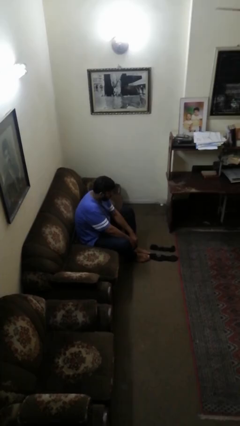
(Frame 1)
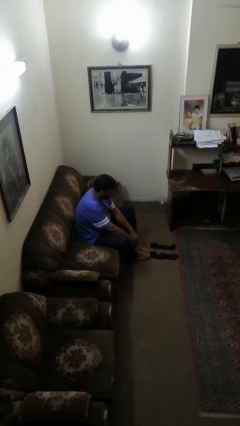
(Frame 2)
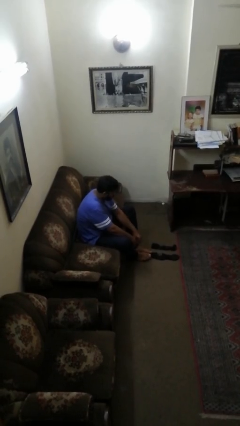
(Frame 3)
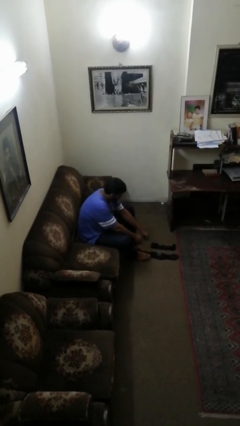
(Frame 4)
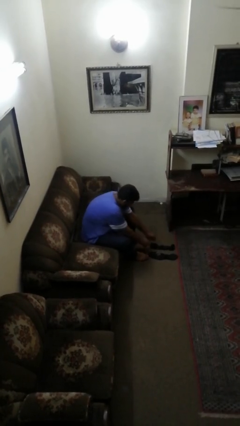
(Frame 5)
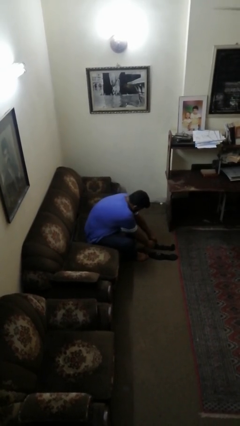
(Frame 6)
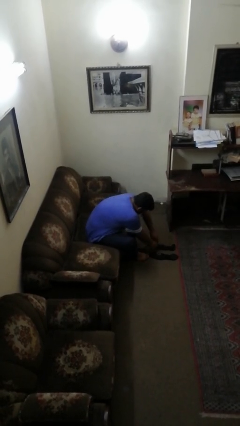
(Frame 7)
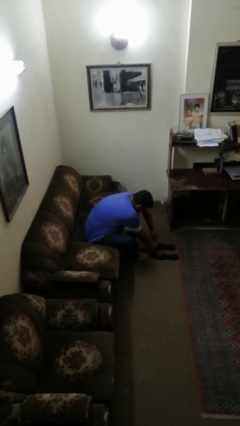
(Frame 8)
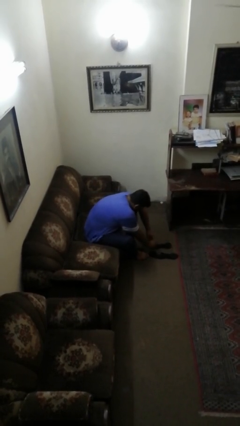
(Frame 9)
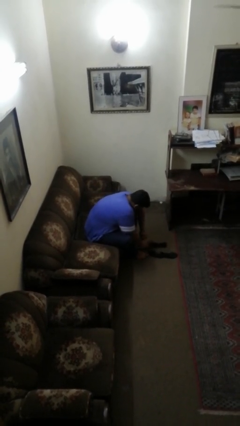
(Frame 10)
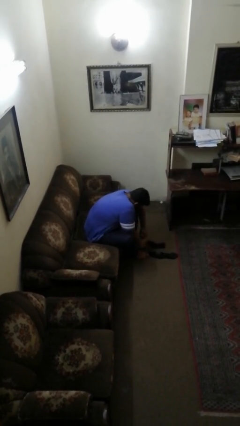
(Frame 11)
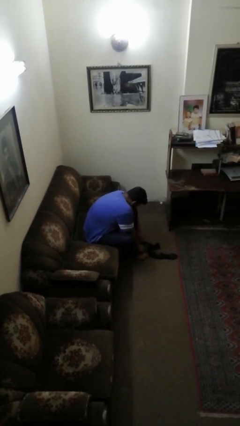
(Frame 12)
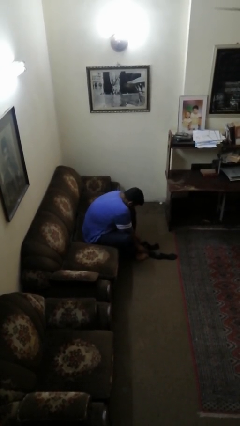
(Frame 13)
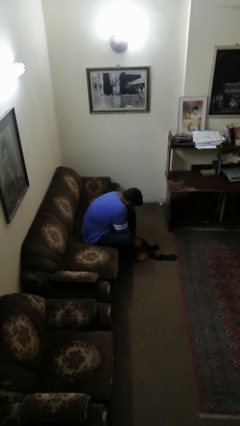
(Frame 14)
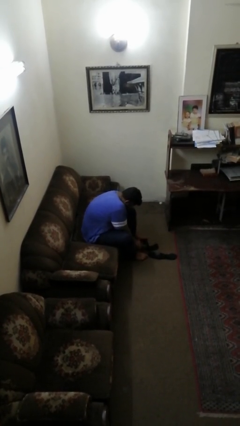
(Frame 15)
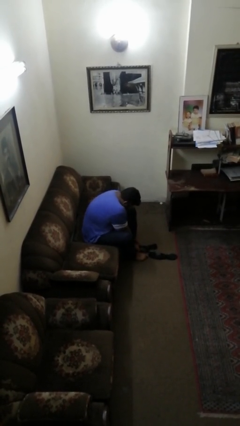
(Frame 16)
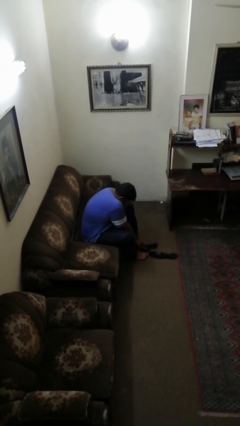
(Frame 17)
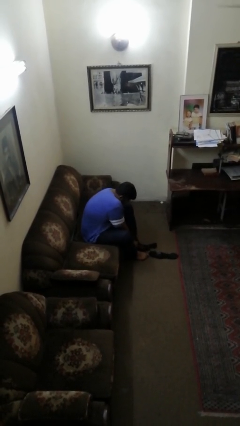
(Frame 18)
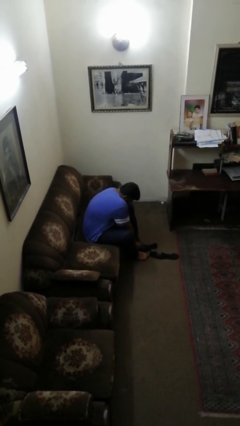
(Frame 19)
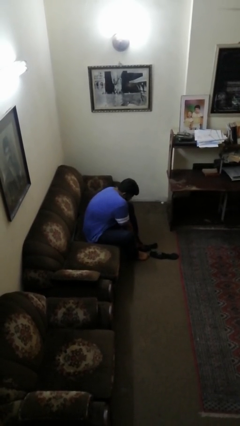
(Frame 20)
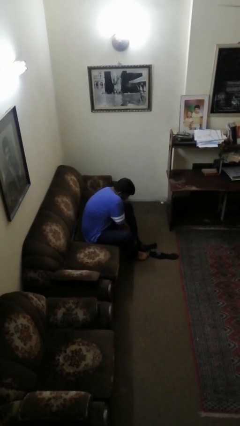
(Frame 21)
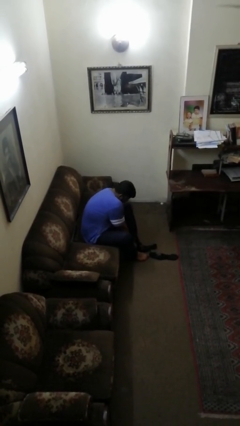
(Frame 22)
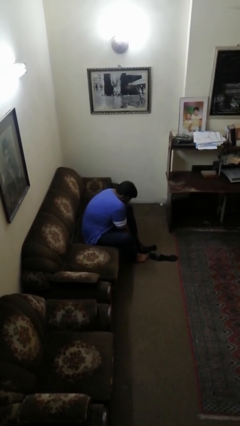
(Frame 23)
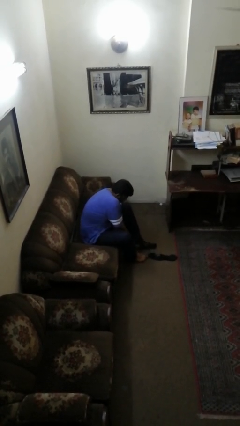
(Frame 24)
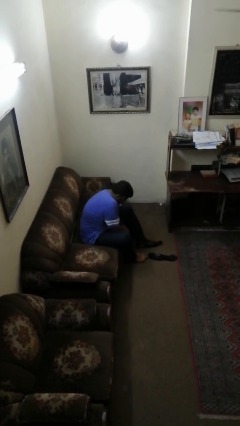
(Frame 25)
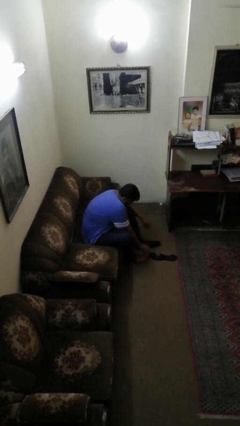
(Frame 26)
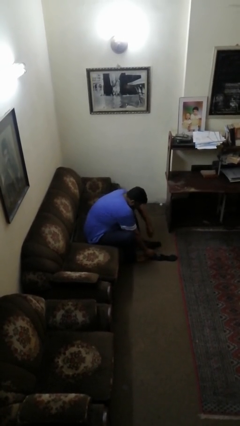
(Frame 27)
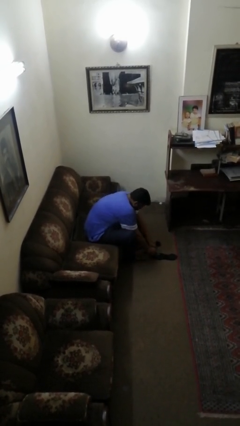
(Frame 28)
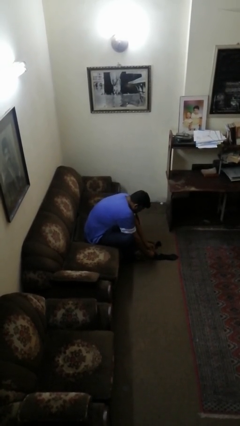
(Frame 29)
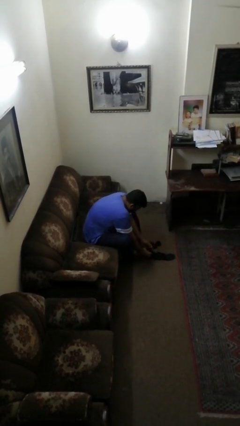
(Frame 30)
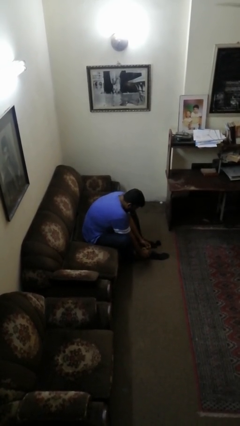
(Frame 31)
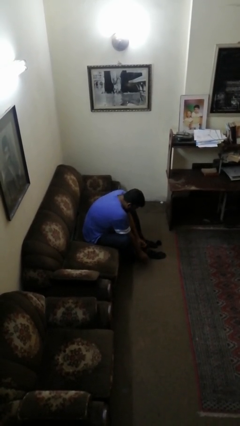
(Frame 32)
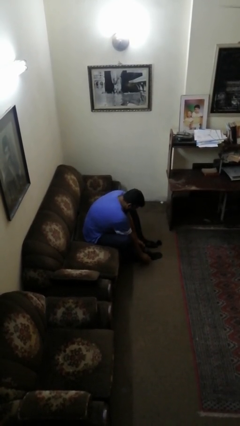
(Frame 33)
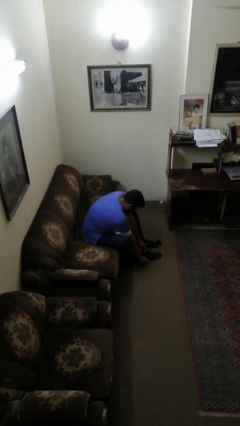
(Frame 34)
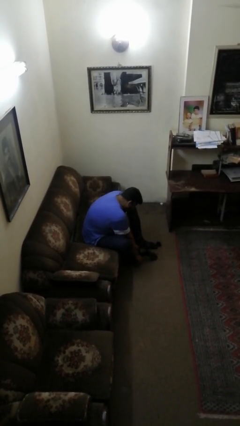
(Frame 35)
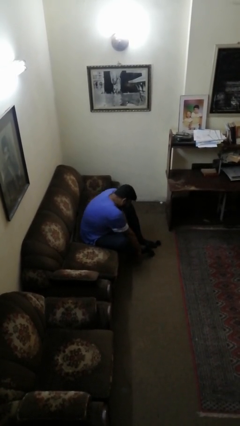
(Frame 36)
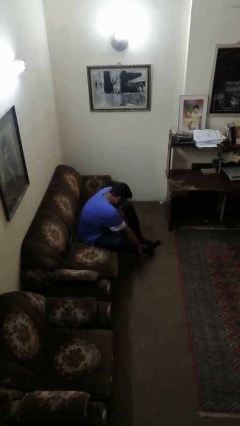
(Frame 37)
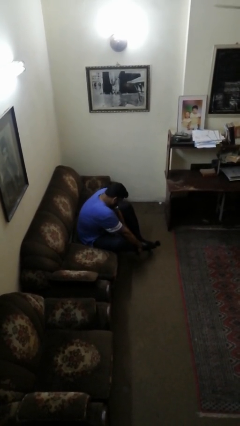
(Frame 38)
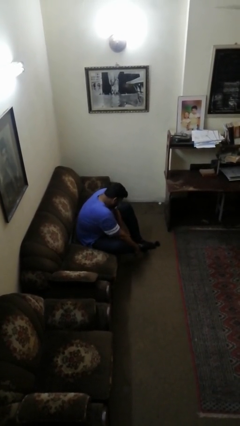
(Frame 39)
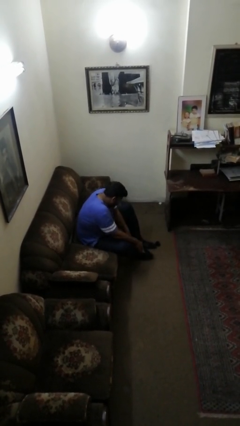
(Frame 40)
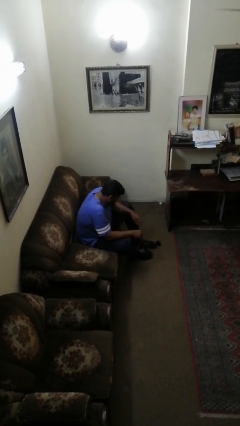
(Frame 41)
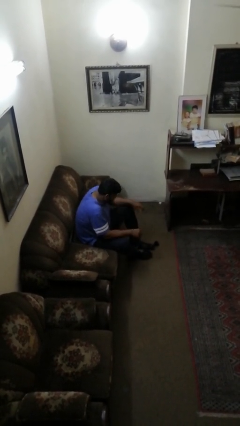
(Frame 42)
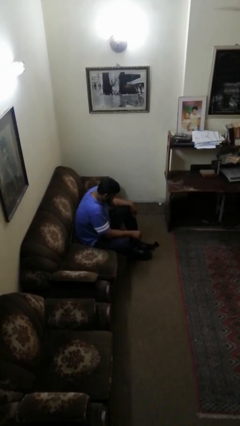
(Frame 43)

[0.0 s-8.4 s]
person puts on socks

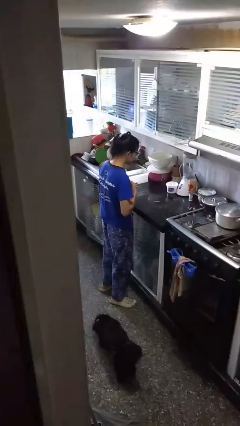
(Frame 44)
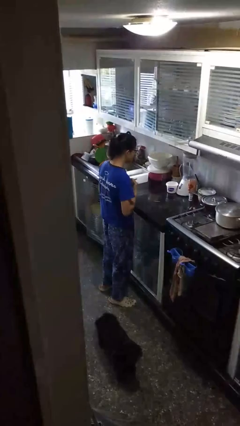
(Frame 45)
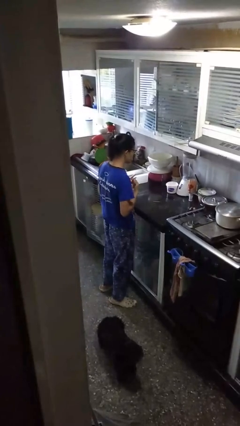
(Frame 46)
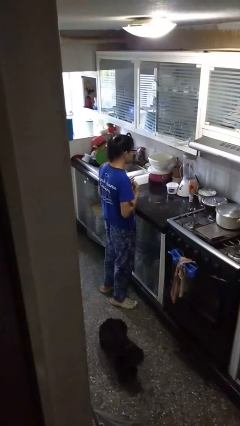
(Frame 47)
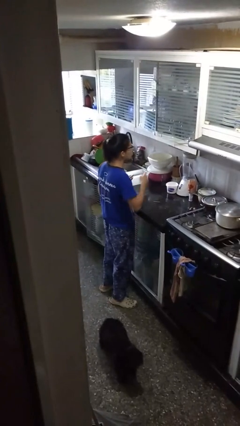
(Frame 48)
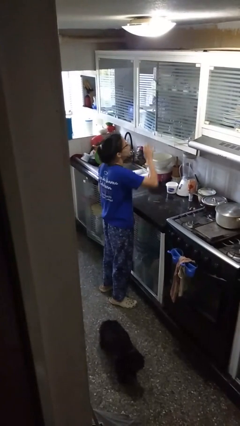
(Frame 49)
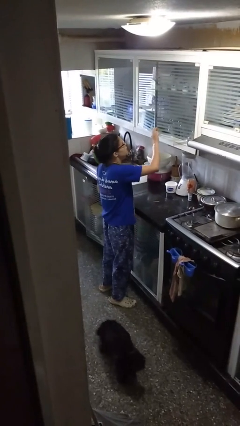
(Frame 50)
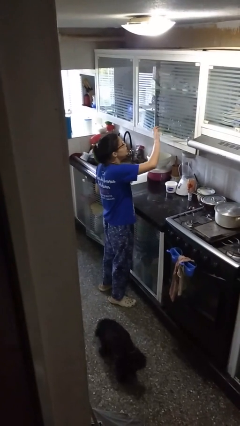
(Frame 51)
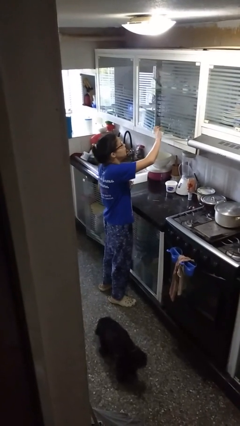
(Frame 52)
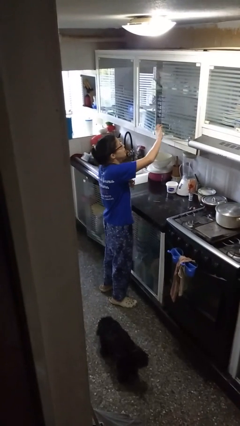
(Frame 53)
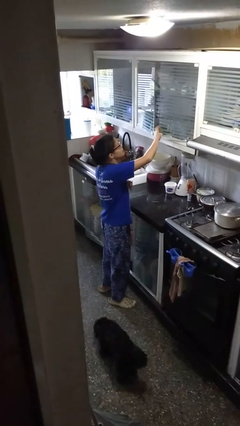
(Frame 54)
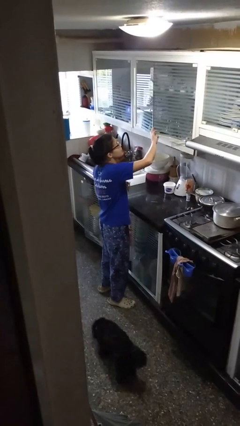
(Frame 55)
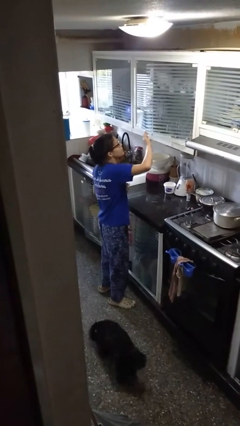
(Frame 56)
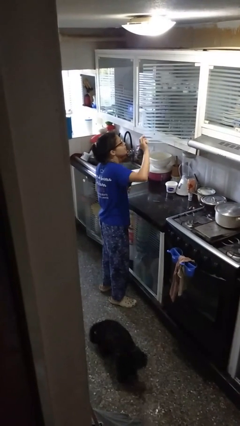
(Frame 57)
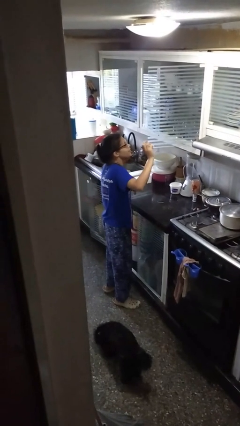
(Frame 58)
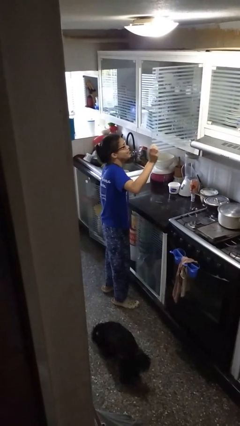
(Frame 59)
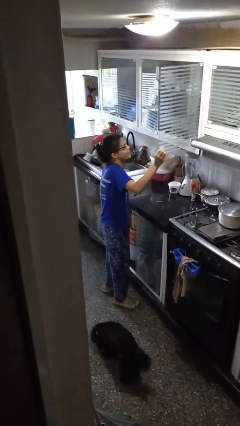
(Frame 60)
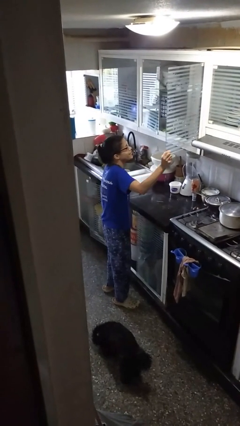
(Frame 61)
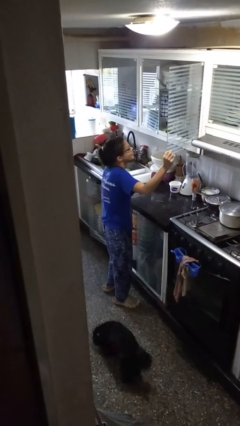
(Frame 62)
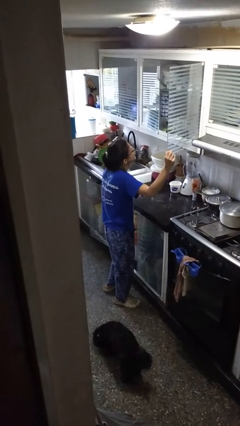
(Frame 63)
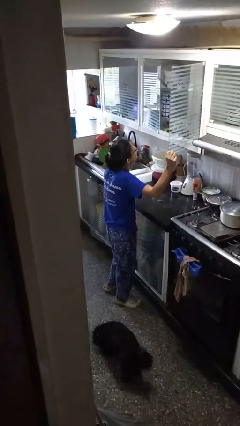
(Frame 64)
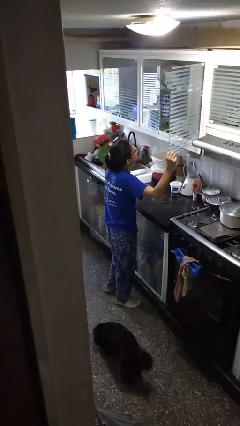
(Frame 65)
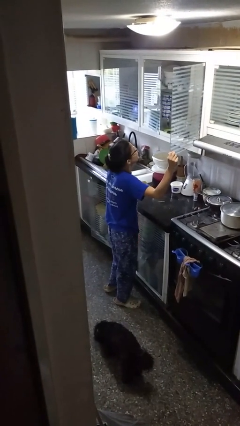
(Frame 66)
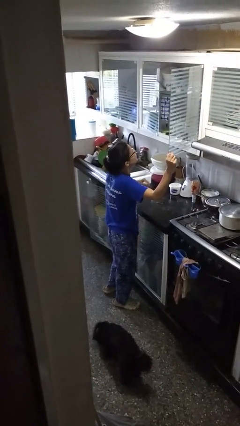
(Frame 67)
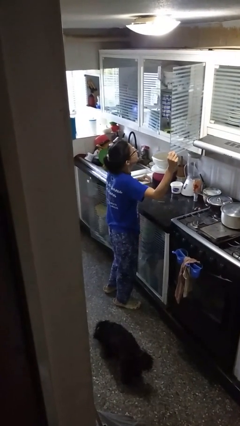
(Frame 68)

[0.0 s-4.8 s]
person opens cabinet

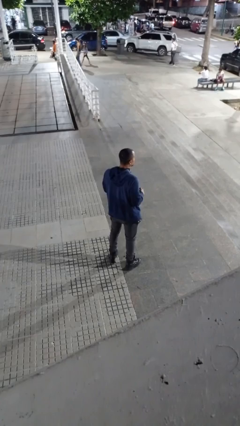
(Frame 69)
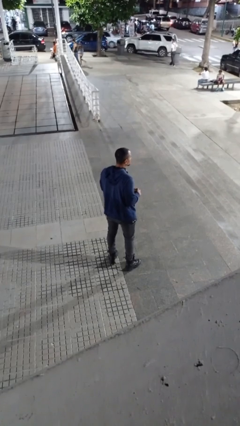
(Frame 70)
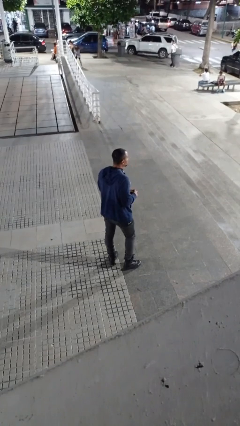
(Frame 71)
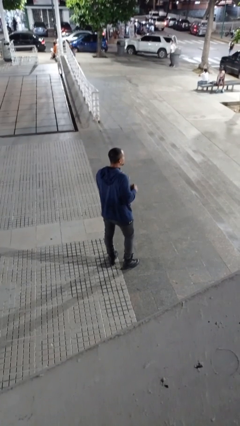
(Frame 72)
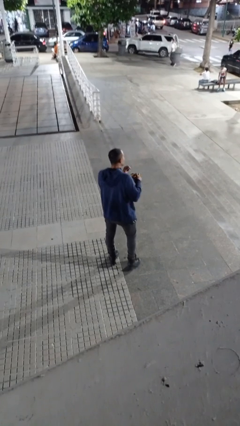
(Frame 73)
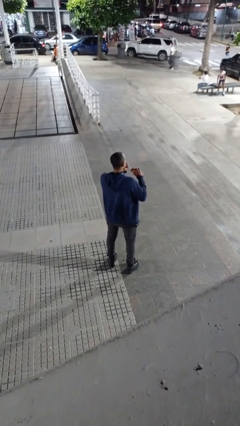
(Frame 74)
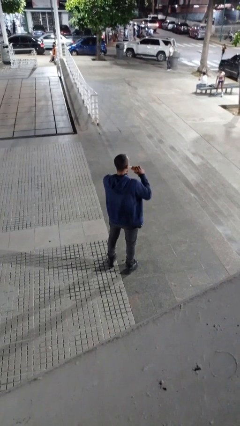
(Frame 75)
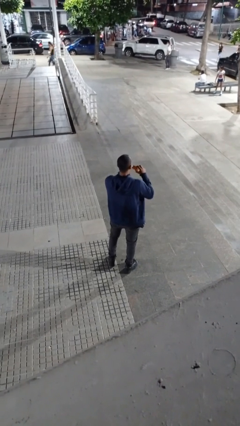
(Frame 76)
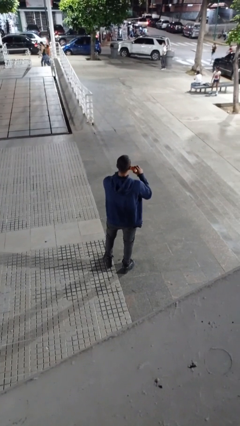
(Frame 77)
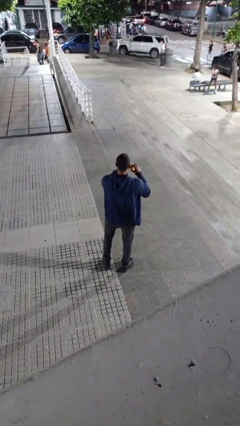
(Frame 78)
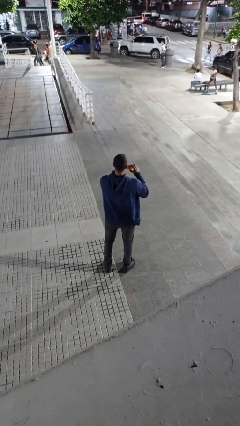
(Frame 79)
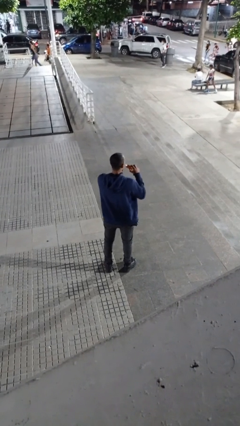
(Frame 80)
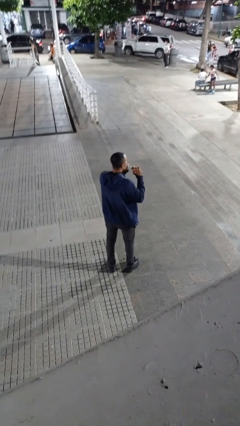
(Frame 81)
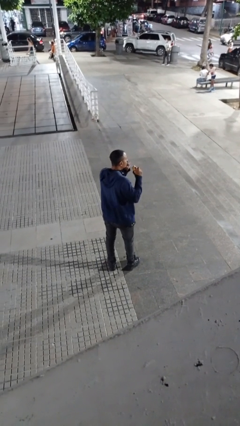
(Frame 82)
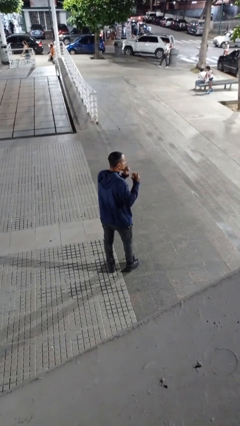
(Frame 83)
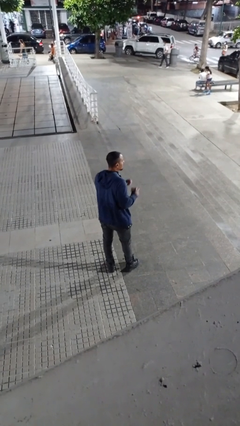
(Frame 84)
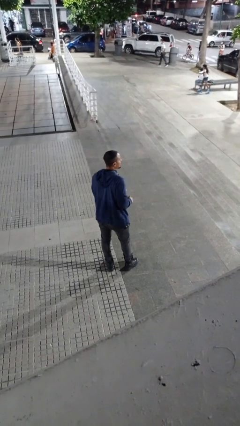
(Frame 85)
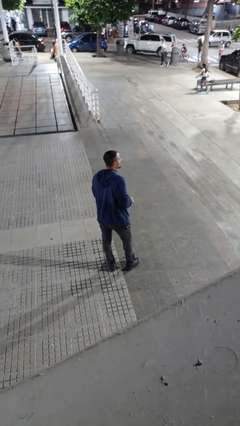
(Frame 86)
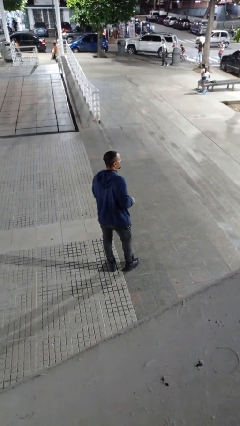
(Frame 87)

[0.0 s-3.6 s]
person drinks from straw

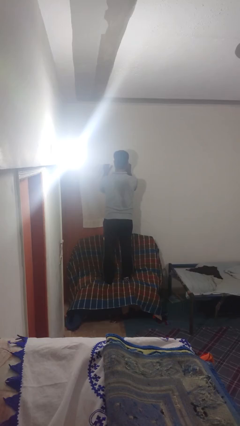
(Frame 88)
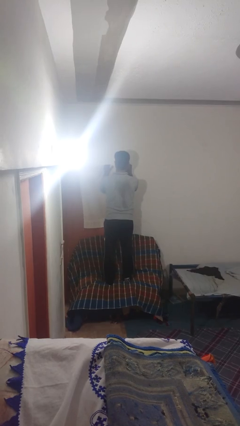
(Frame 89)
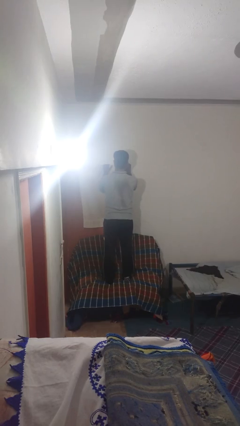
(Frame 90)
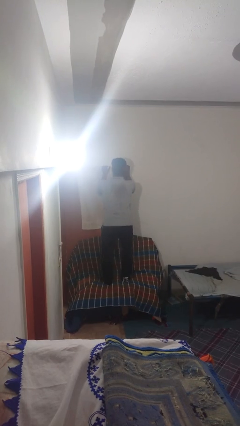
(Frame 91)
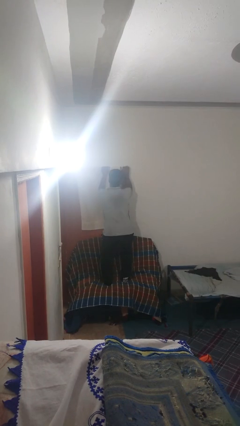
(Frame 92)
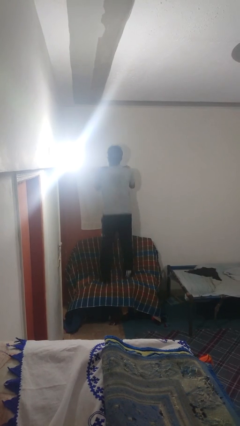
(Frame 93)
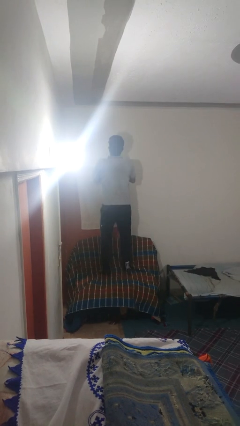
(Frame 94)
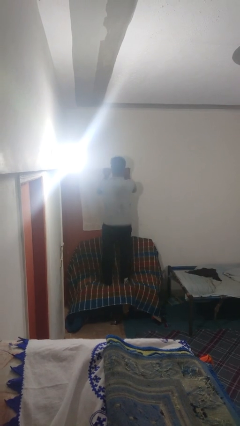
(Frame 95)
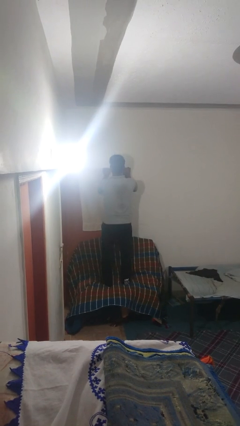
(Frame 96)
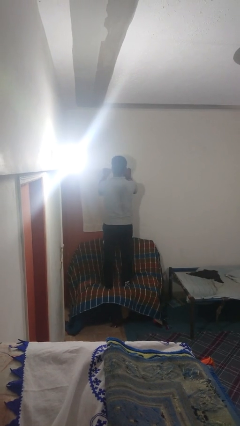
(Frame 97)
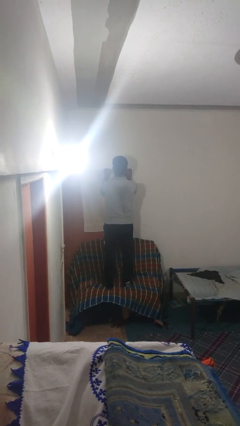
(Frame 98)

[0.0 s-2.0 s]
person jumps on couch
